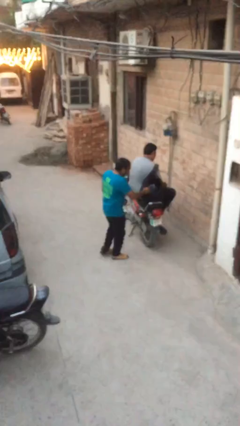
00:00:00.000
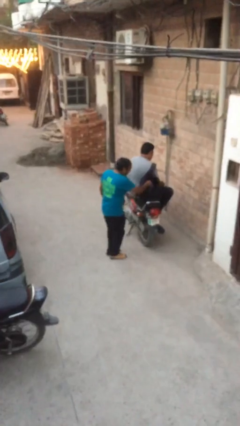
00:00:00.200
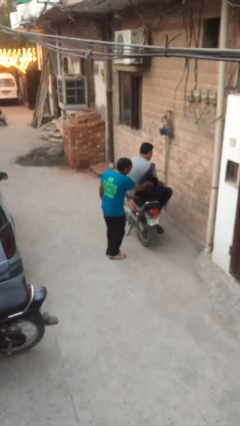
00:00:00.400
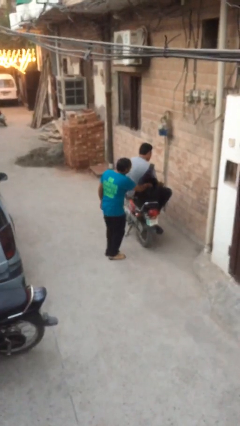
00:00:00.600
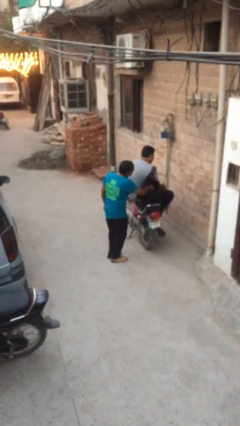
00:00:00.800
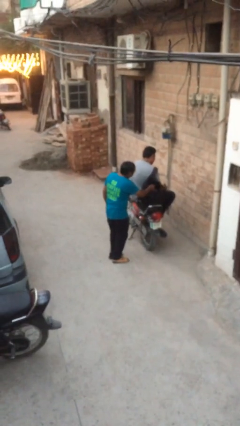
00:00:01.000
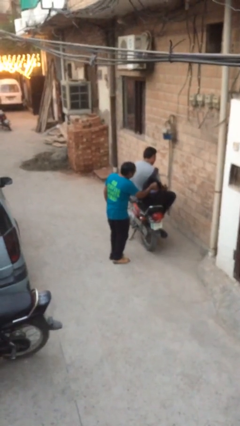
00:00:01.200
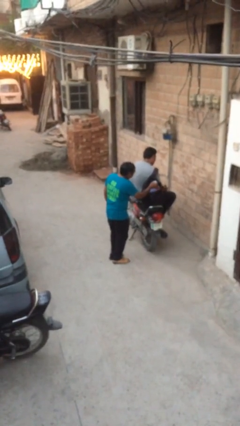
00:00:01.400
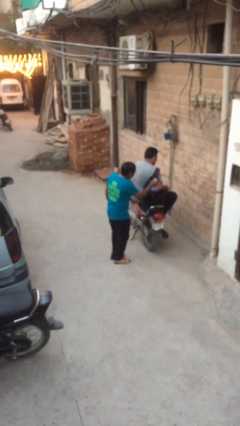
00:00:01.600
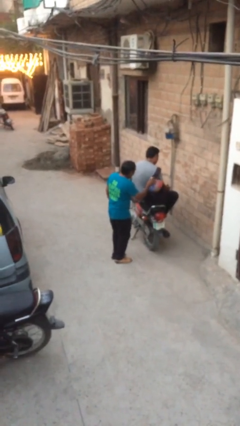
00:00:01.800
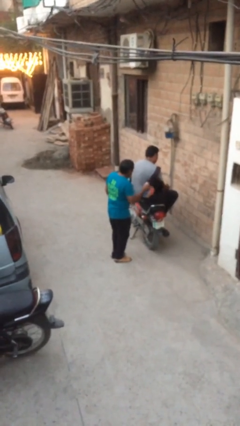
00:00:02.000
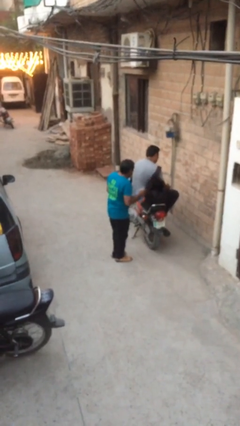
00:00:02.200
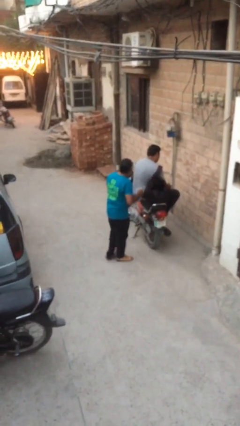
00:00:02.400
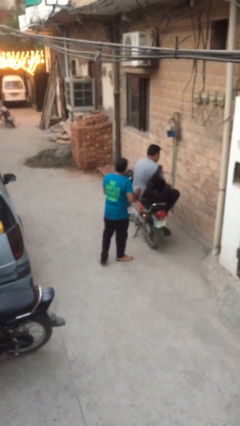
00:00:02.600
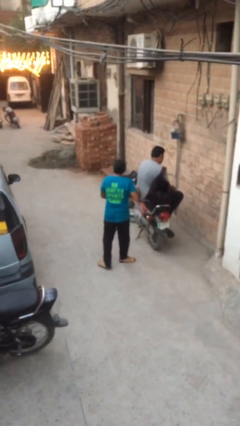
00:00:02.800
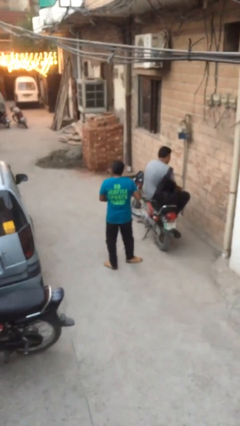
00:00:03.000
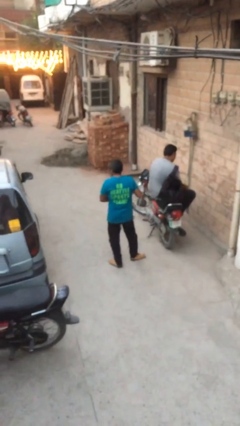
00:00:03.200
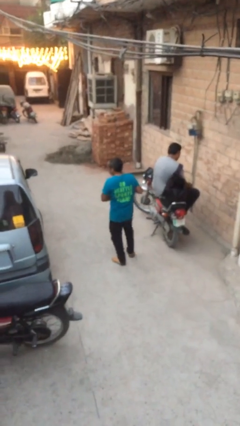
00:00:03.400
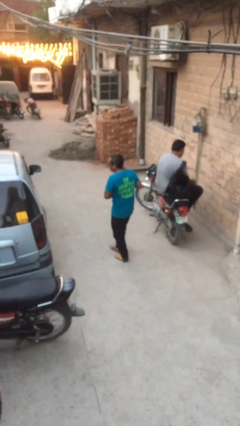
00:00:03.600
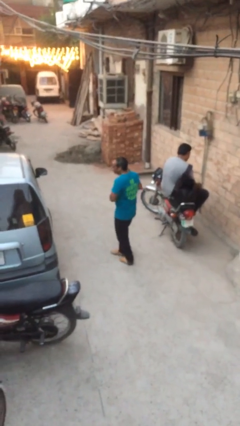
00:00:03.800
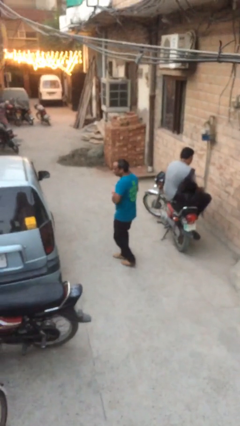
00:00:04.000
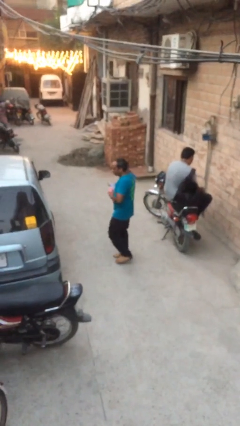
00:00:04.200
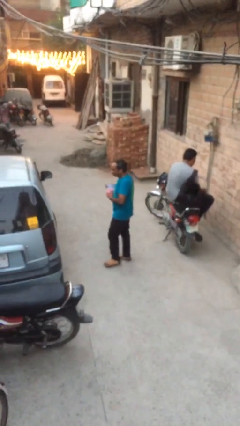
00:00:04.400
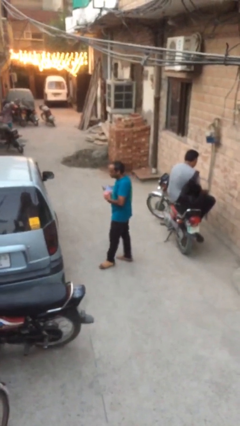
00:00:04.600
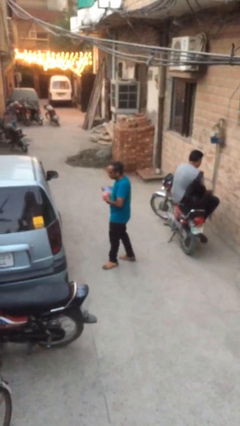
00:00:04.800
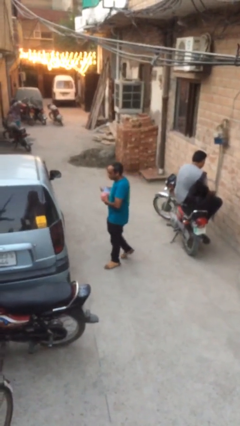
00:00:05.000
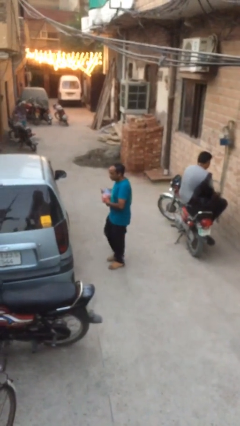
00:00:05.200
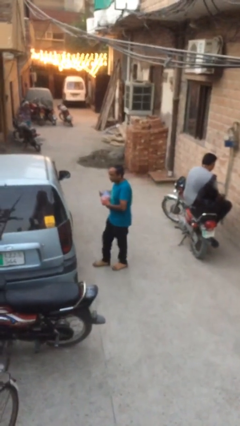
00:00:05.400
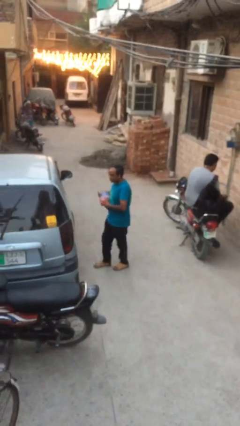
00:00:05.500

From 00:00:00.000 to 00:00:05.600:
person steals object from person

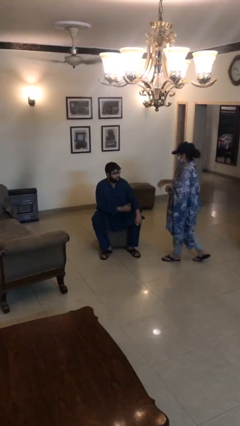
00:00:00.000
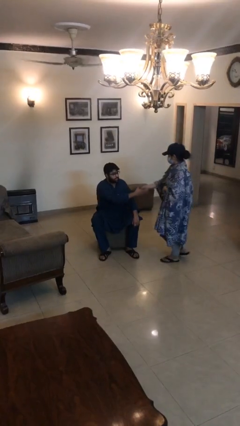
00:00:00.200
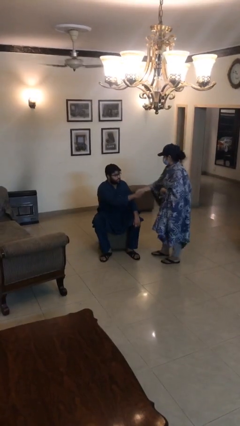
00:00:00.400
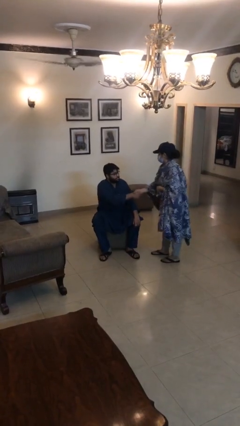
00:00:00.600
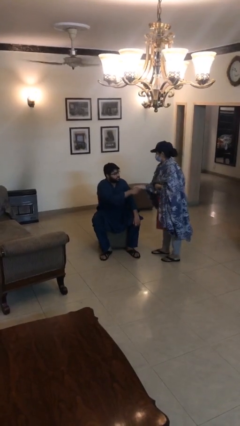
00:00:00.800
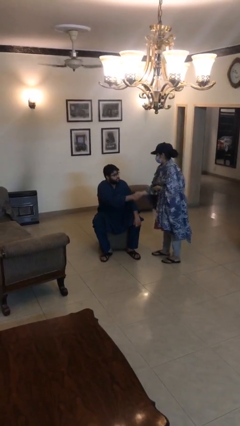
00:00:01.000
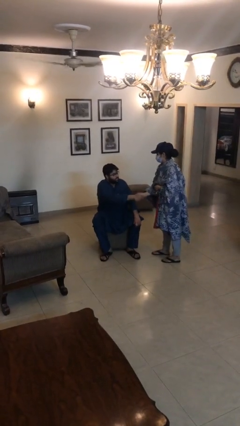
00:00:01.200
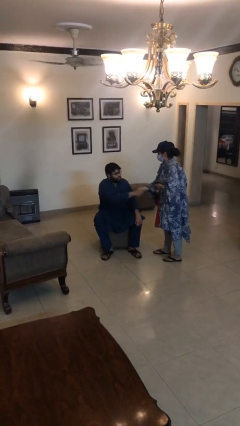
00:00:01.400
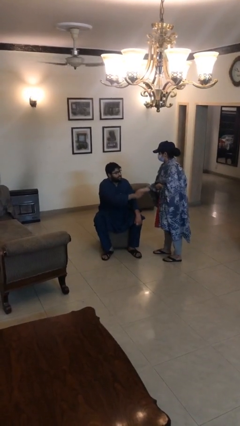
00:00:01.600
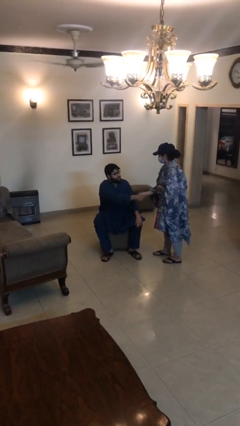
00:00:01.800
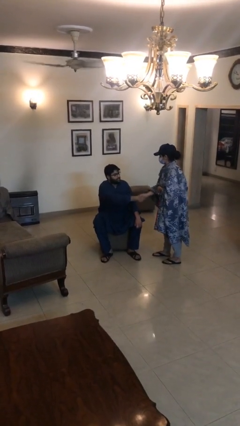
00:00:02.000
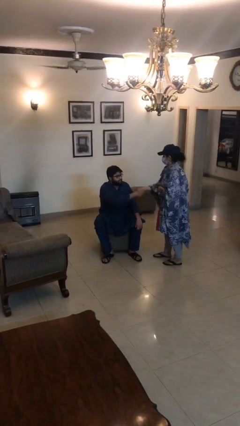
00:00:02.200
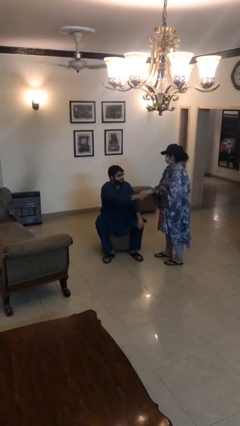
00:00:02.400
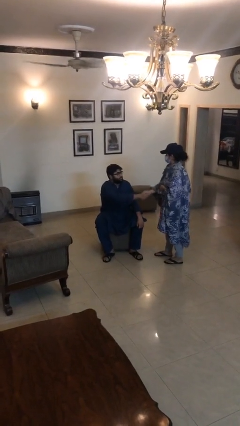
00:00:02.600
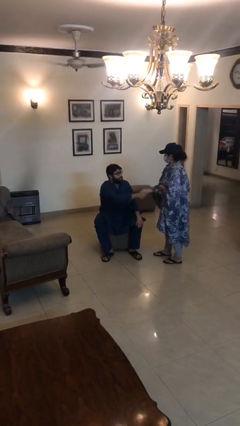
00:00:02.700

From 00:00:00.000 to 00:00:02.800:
person shakes hand

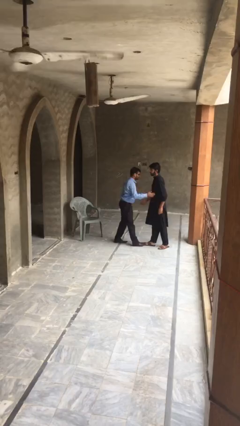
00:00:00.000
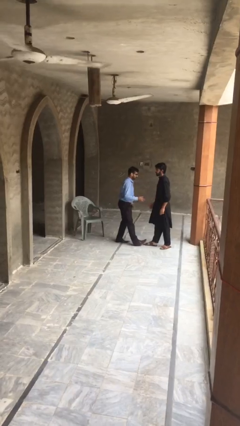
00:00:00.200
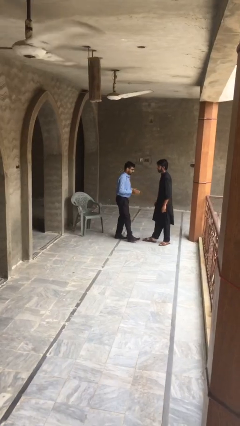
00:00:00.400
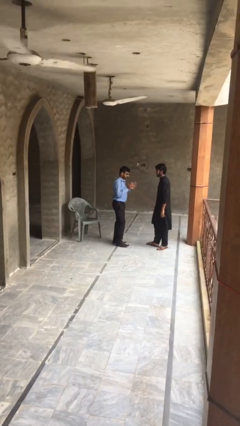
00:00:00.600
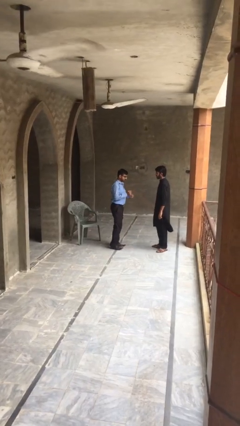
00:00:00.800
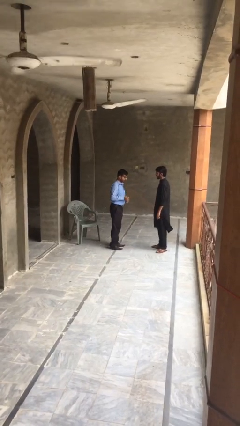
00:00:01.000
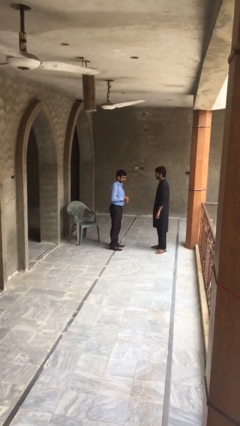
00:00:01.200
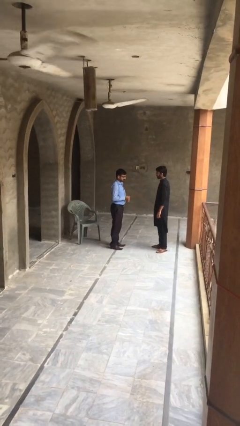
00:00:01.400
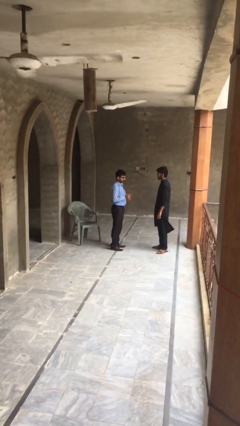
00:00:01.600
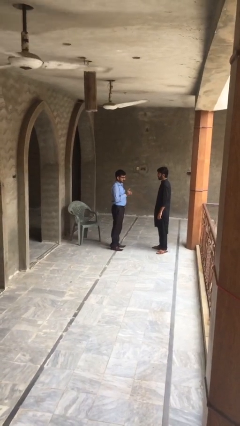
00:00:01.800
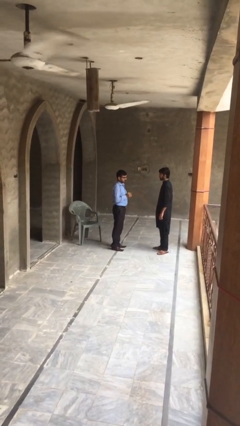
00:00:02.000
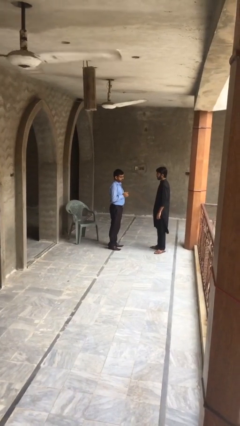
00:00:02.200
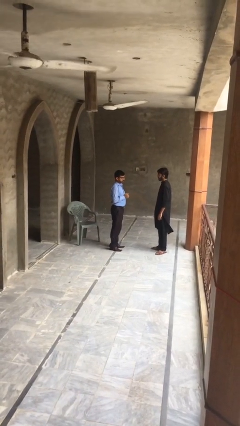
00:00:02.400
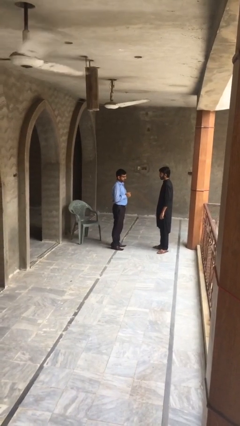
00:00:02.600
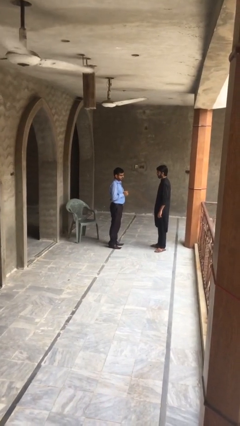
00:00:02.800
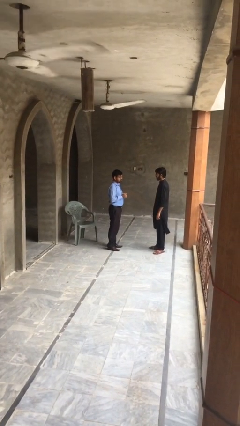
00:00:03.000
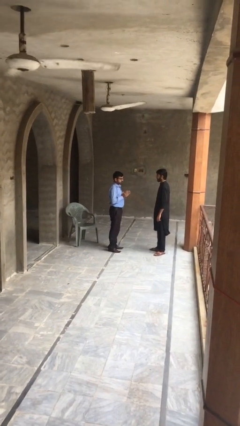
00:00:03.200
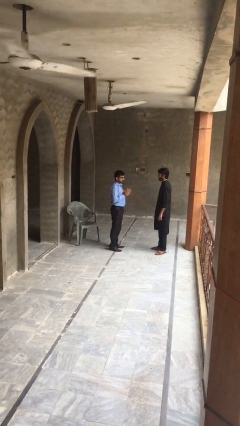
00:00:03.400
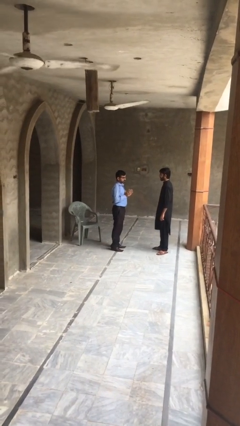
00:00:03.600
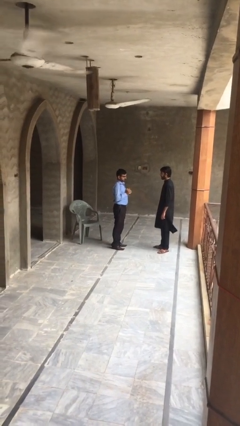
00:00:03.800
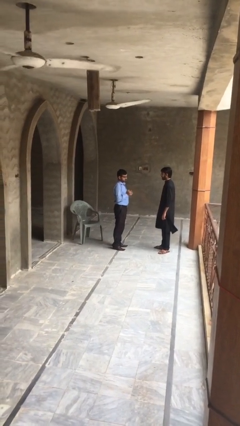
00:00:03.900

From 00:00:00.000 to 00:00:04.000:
person talks to person

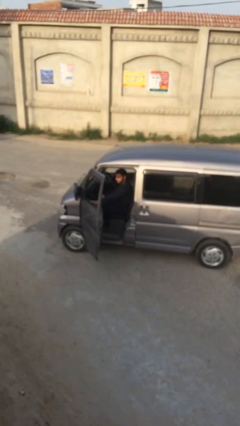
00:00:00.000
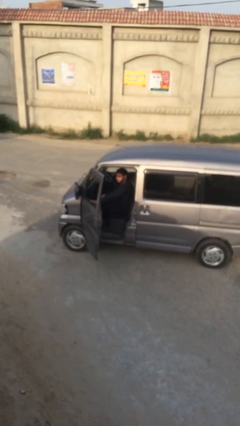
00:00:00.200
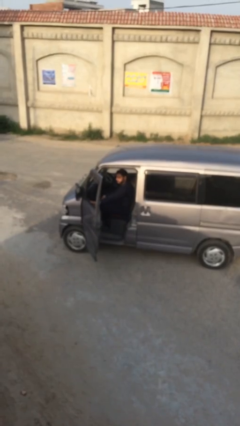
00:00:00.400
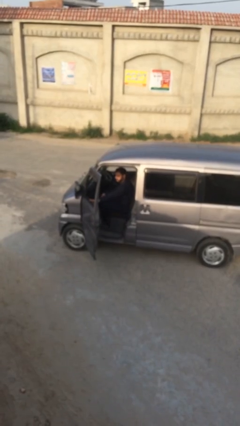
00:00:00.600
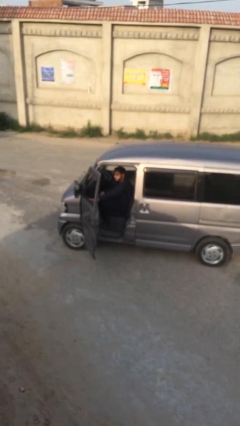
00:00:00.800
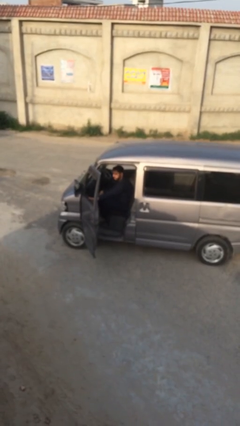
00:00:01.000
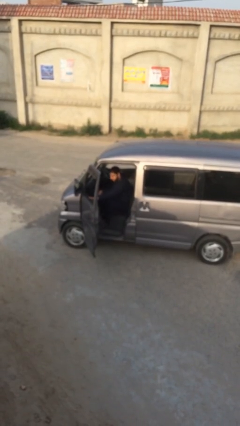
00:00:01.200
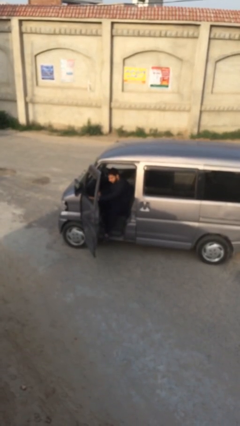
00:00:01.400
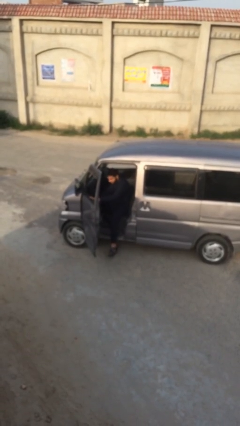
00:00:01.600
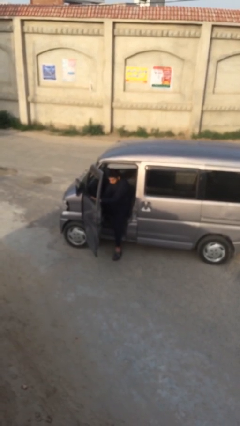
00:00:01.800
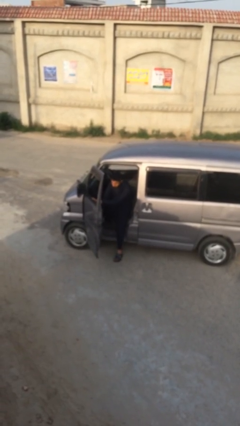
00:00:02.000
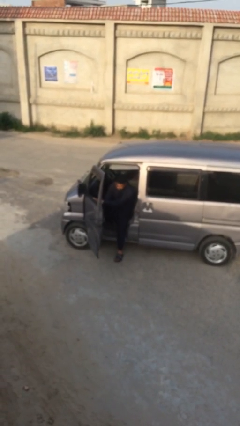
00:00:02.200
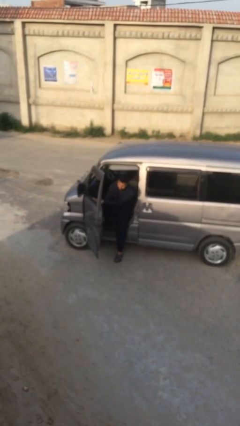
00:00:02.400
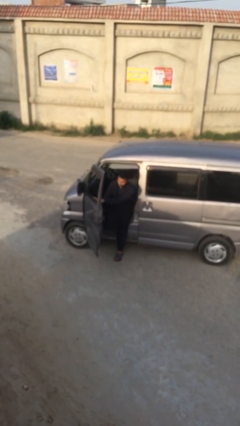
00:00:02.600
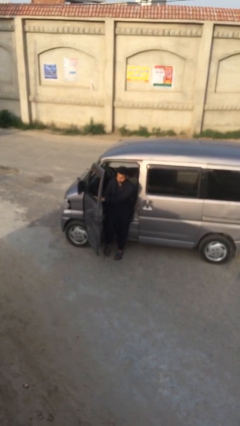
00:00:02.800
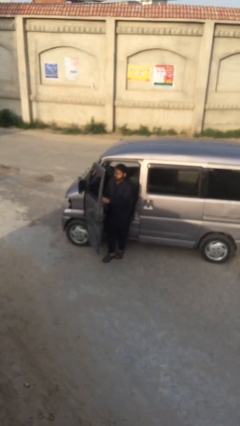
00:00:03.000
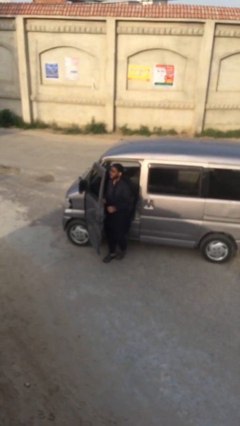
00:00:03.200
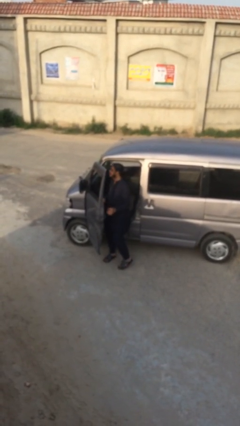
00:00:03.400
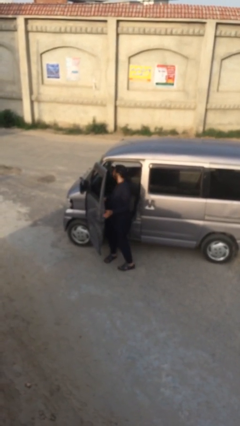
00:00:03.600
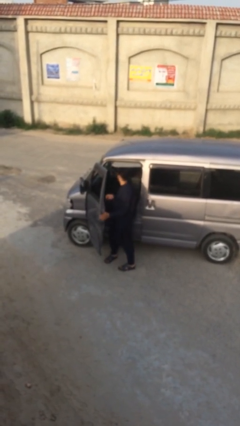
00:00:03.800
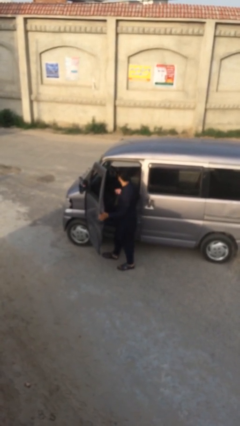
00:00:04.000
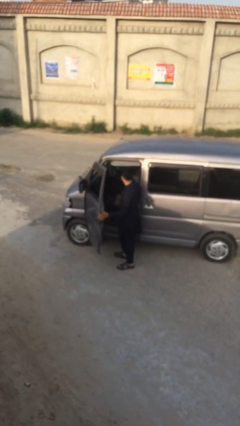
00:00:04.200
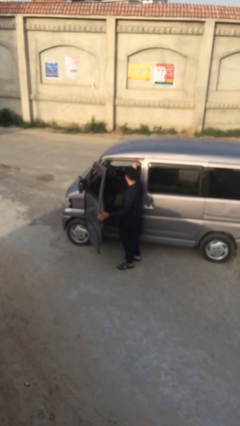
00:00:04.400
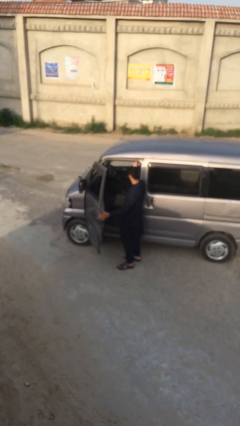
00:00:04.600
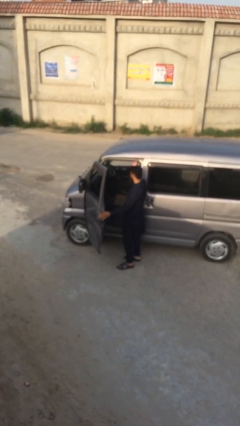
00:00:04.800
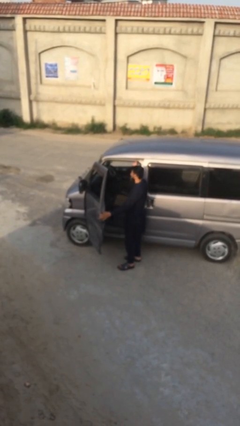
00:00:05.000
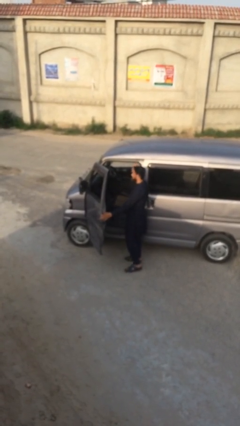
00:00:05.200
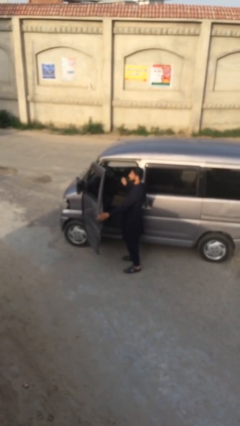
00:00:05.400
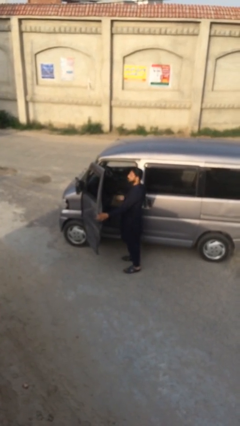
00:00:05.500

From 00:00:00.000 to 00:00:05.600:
person exits car
